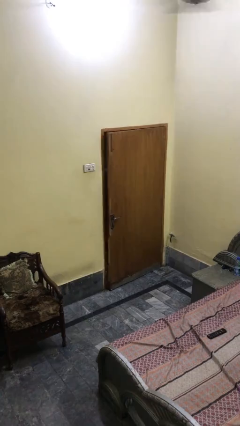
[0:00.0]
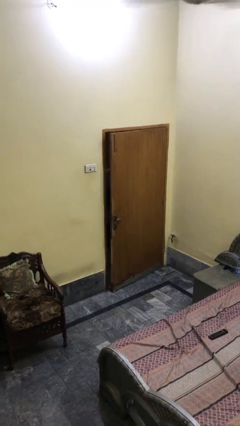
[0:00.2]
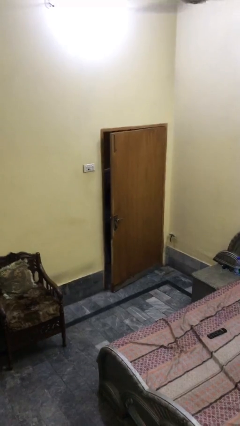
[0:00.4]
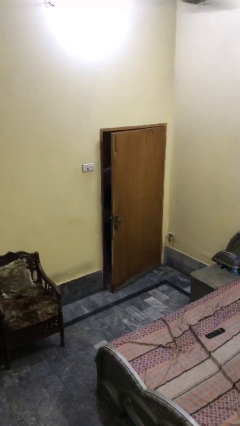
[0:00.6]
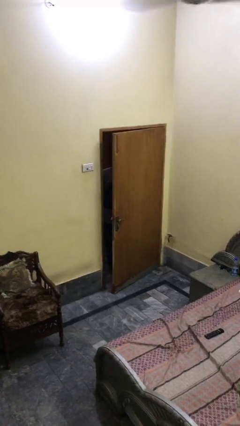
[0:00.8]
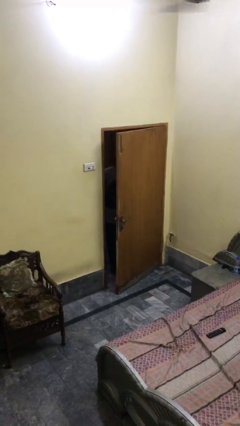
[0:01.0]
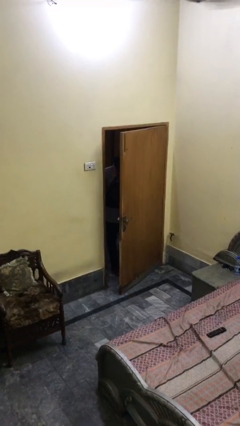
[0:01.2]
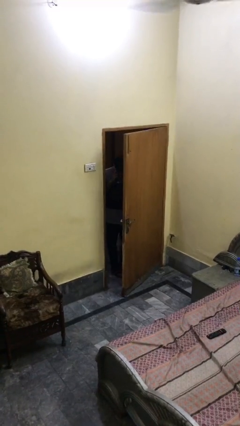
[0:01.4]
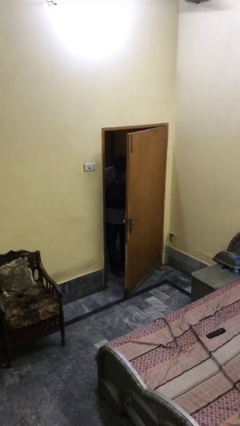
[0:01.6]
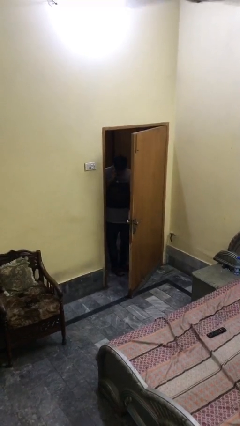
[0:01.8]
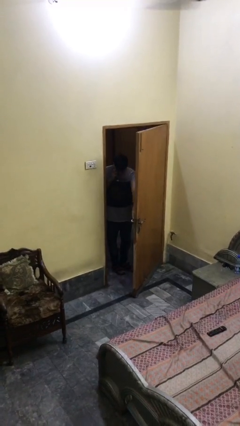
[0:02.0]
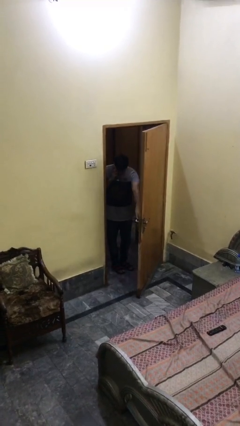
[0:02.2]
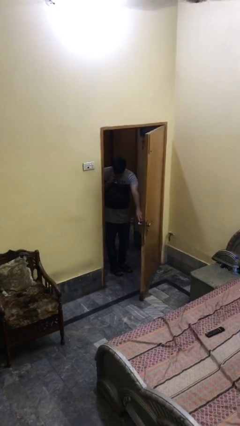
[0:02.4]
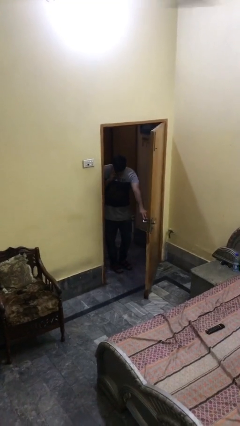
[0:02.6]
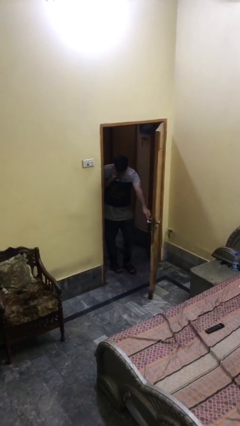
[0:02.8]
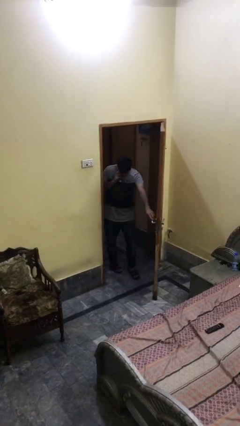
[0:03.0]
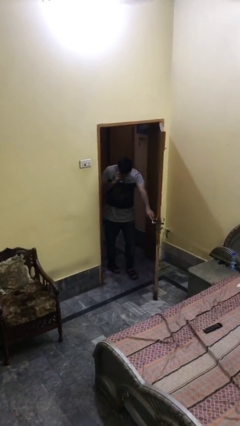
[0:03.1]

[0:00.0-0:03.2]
person opens facility door

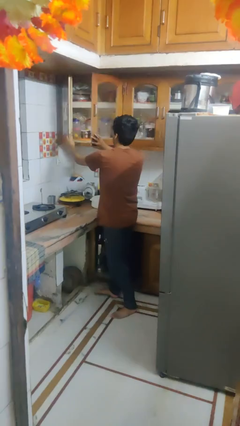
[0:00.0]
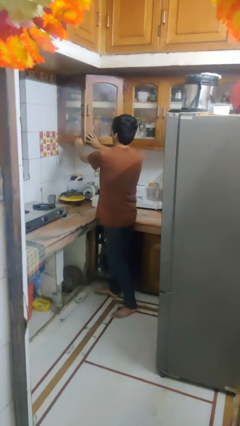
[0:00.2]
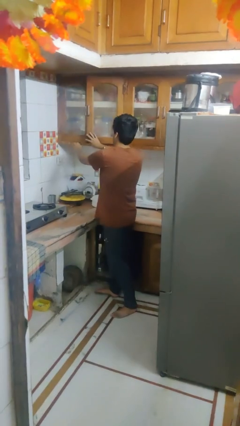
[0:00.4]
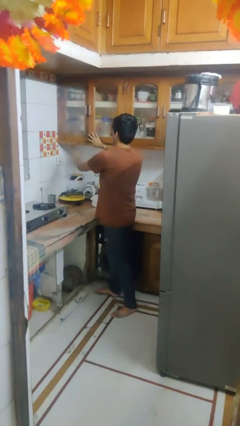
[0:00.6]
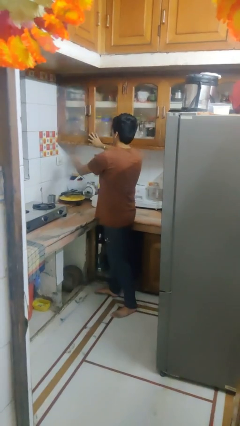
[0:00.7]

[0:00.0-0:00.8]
person closes cabinet

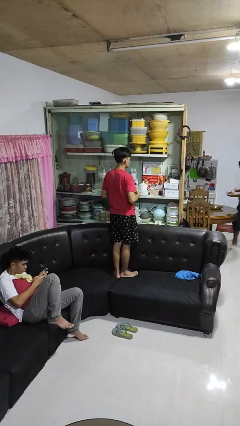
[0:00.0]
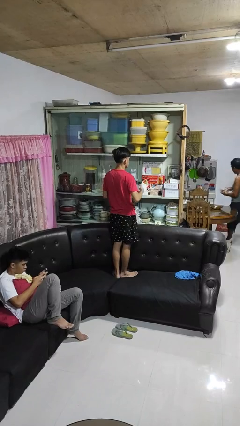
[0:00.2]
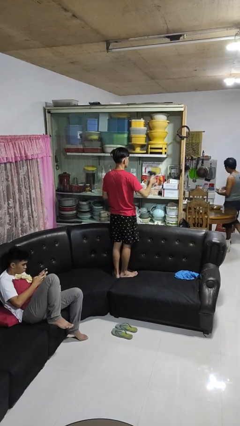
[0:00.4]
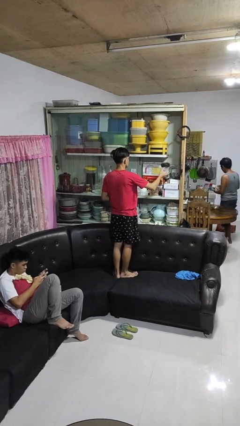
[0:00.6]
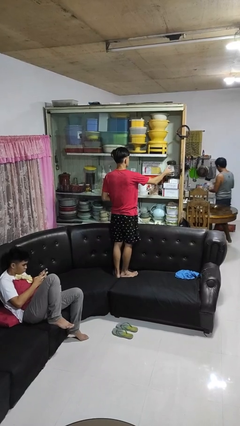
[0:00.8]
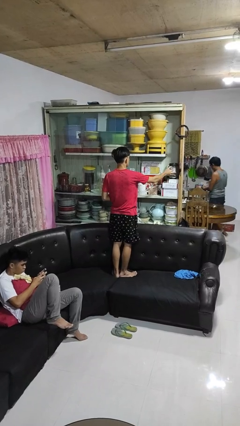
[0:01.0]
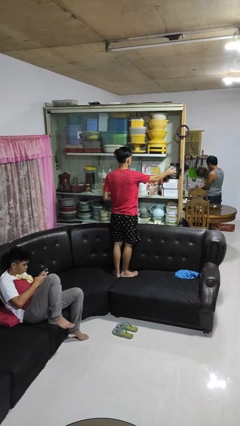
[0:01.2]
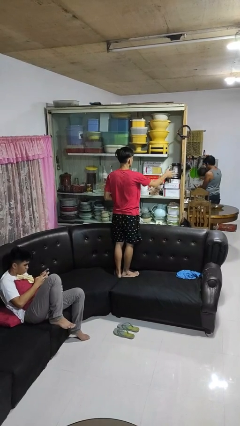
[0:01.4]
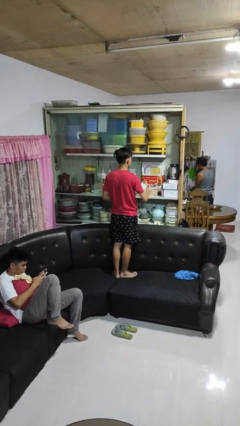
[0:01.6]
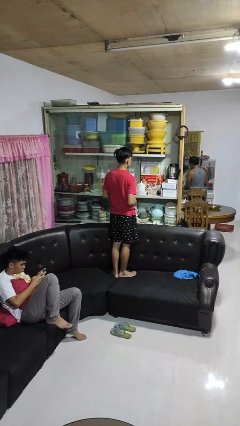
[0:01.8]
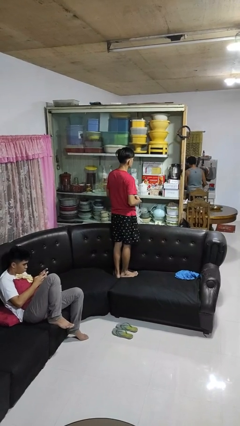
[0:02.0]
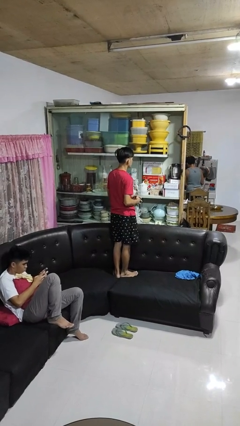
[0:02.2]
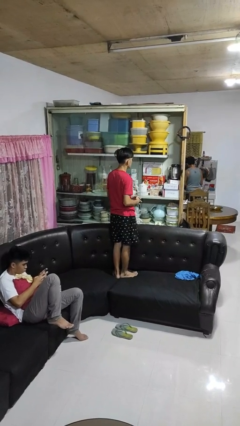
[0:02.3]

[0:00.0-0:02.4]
person puts down object into cabinet

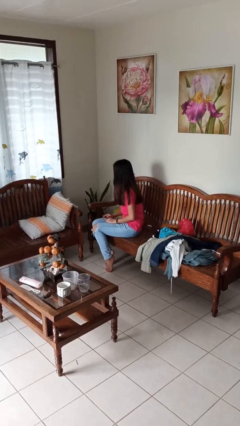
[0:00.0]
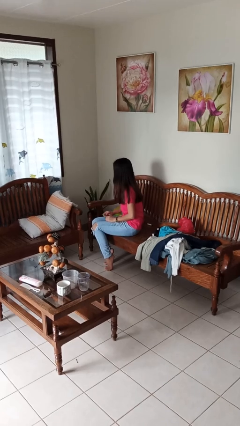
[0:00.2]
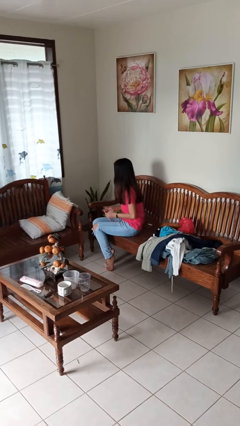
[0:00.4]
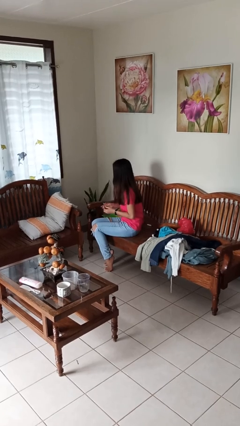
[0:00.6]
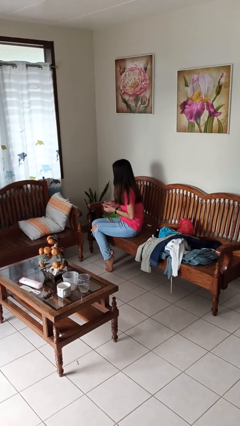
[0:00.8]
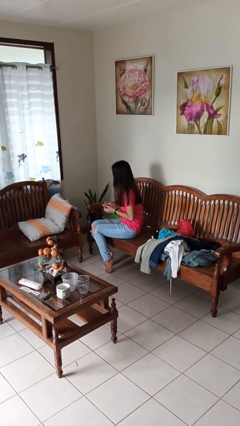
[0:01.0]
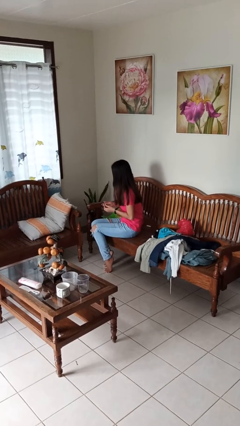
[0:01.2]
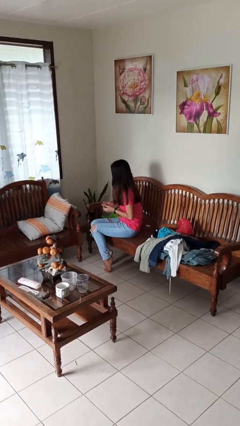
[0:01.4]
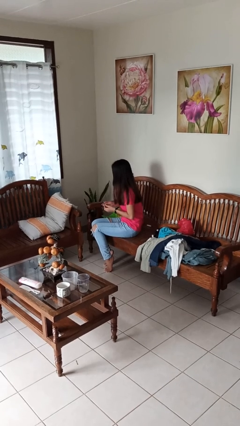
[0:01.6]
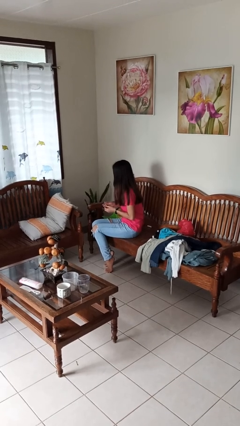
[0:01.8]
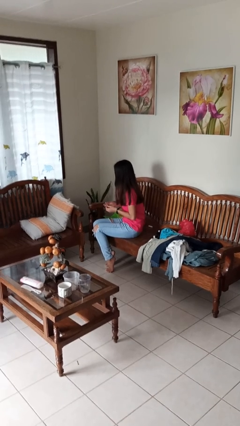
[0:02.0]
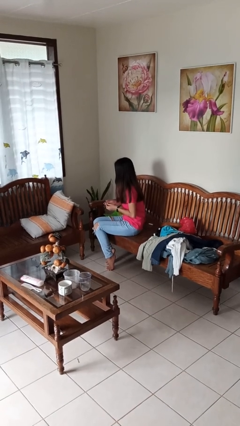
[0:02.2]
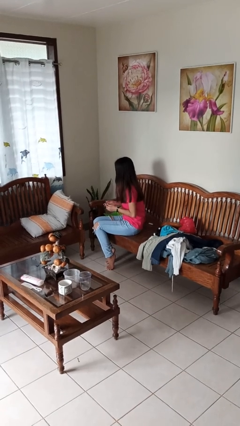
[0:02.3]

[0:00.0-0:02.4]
person clips fingernails

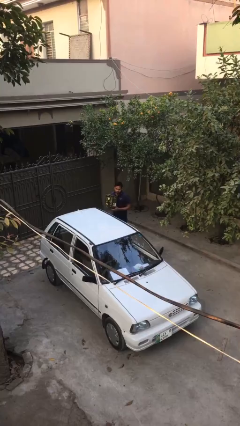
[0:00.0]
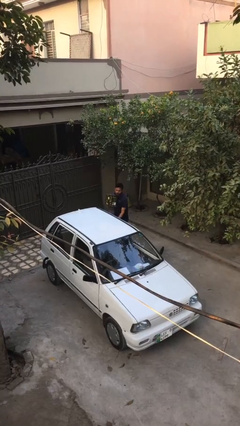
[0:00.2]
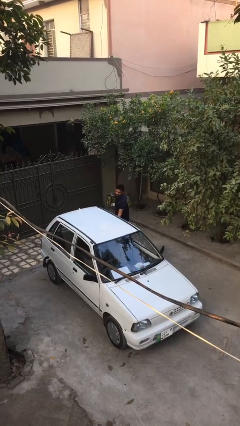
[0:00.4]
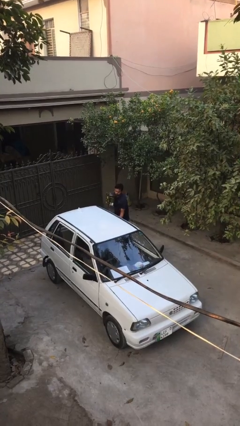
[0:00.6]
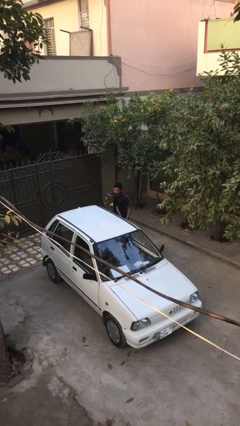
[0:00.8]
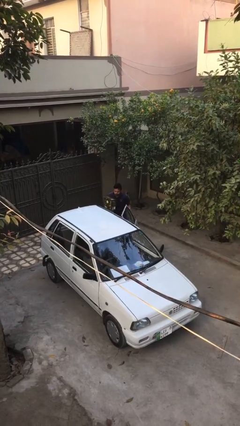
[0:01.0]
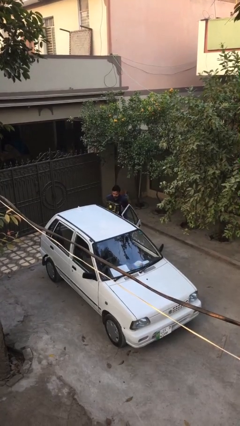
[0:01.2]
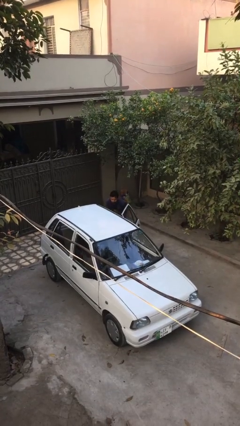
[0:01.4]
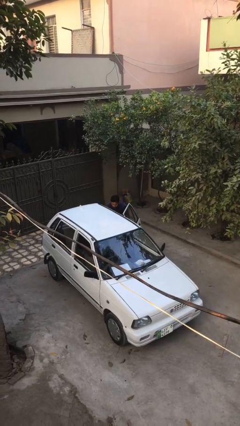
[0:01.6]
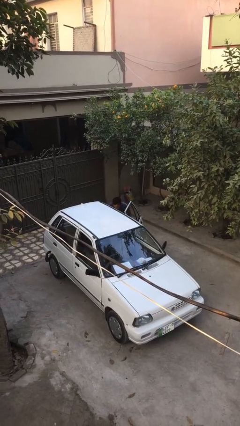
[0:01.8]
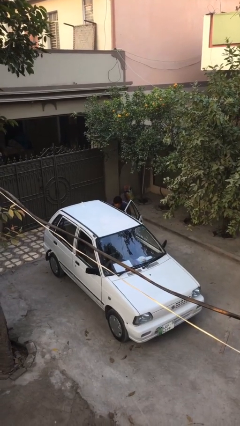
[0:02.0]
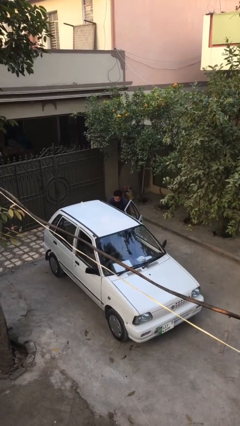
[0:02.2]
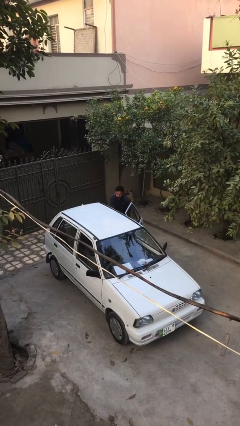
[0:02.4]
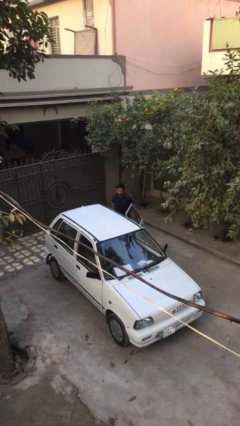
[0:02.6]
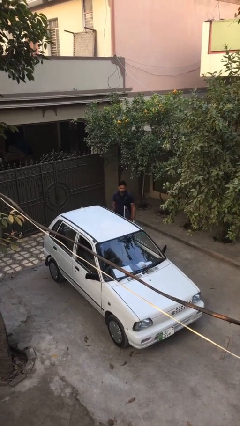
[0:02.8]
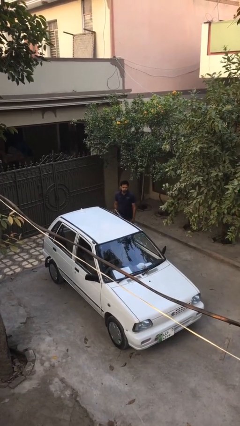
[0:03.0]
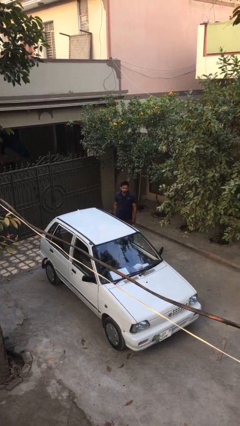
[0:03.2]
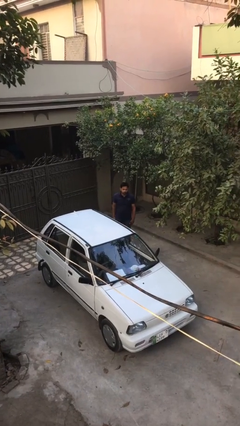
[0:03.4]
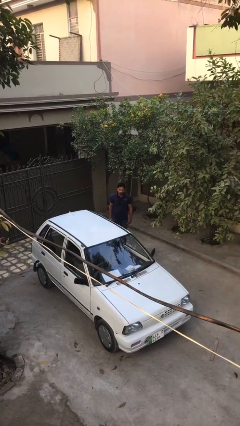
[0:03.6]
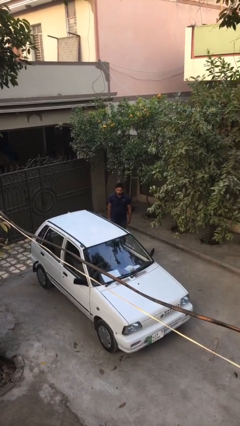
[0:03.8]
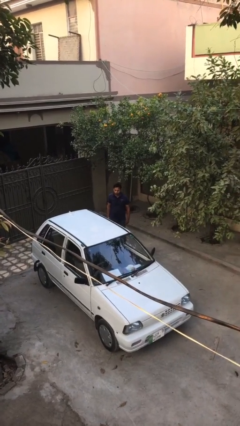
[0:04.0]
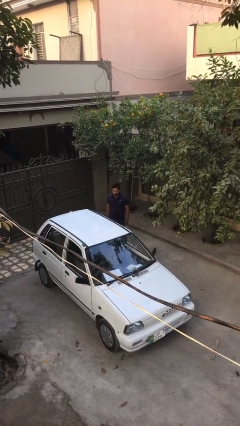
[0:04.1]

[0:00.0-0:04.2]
person loads car

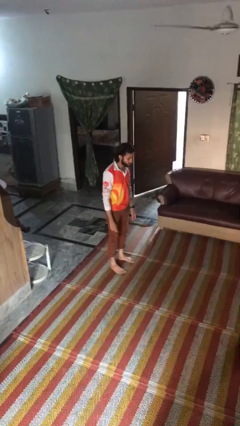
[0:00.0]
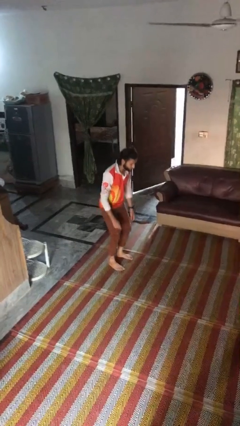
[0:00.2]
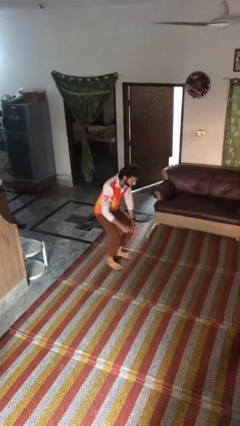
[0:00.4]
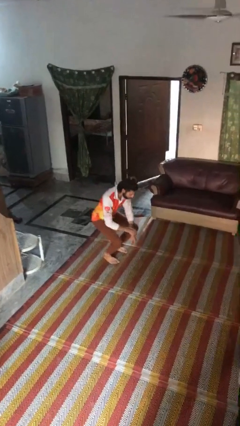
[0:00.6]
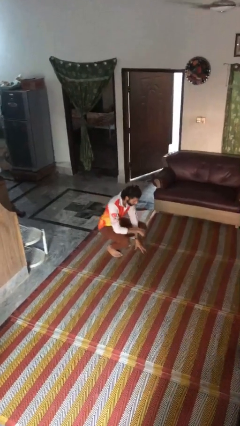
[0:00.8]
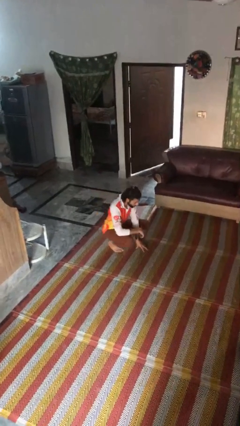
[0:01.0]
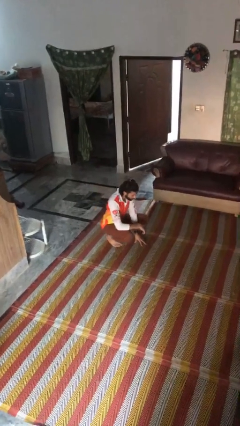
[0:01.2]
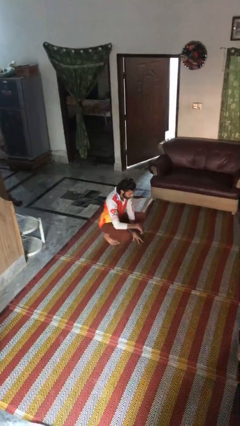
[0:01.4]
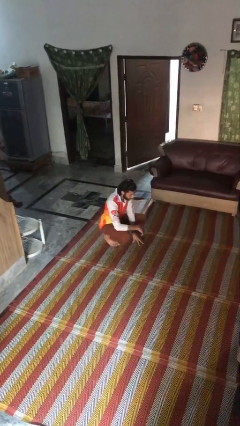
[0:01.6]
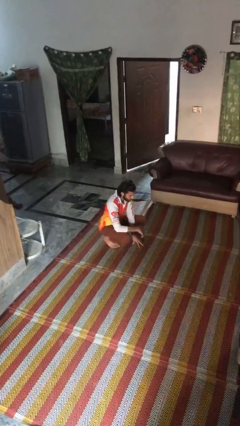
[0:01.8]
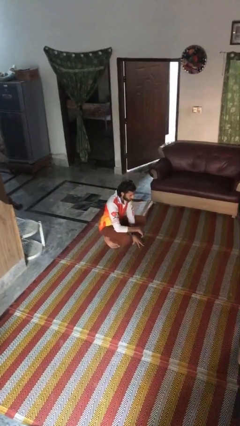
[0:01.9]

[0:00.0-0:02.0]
person squats

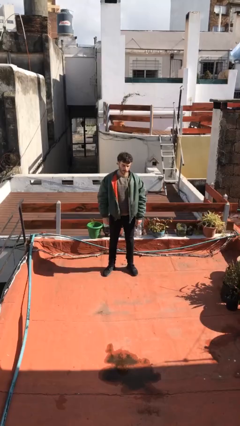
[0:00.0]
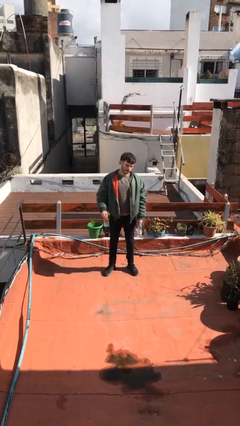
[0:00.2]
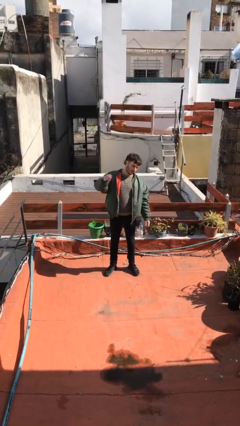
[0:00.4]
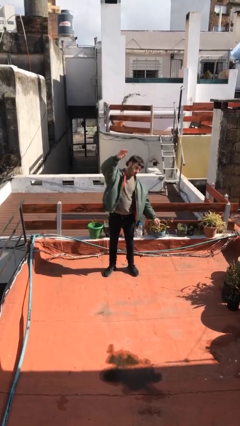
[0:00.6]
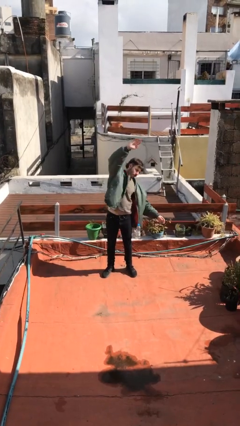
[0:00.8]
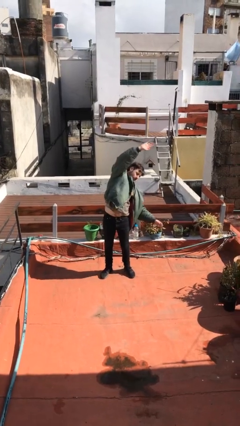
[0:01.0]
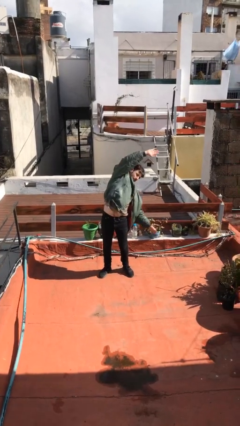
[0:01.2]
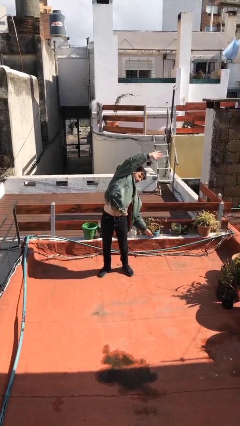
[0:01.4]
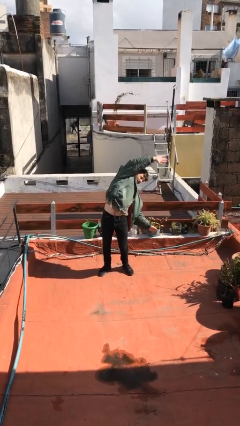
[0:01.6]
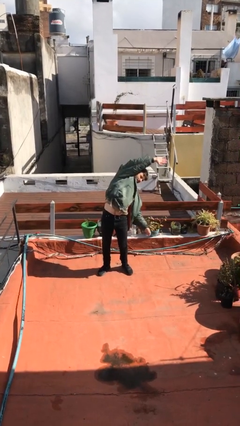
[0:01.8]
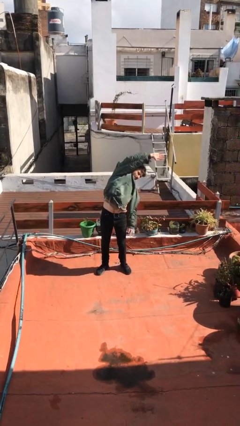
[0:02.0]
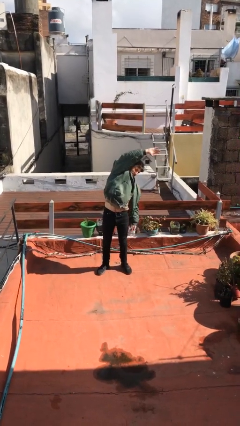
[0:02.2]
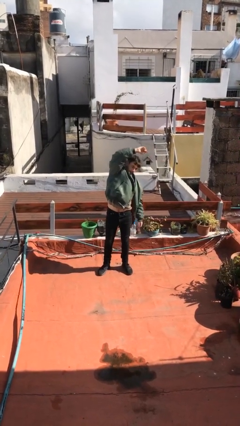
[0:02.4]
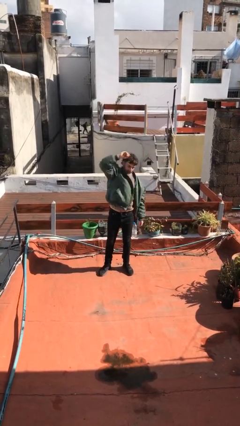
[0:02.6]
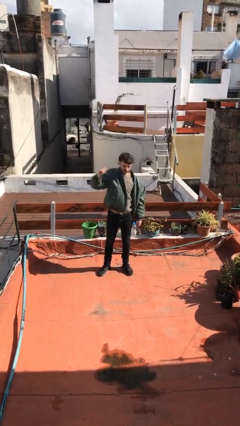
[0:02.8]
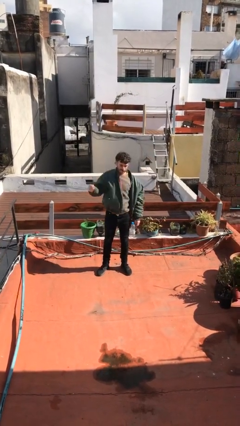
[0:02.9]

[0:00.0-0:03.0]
person stretches arms to side
